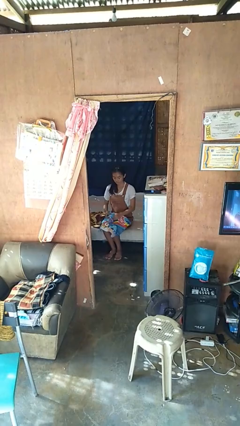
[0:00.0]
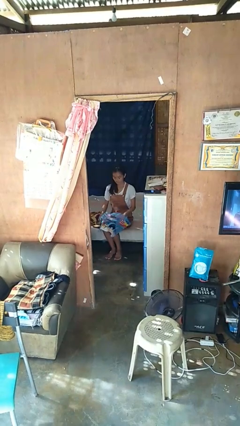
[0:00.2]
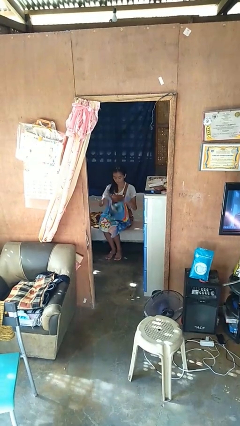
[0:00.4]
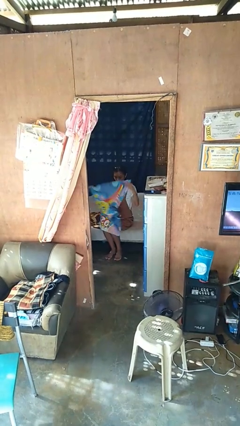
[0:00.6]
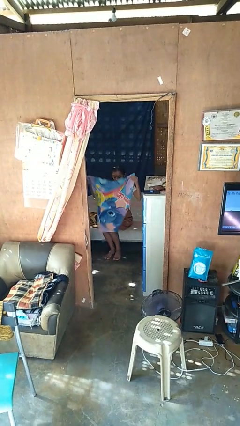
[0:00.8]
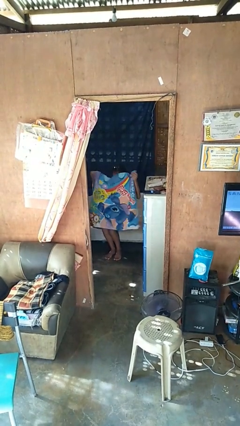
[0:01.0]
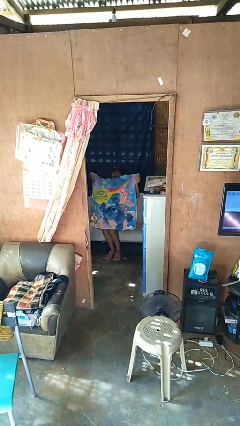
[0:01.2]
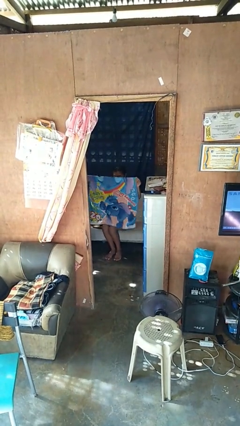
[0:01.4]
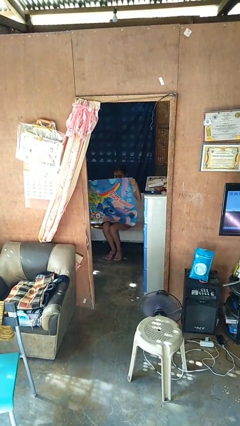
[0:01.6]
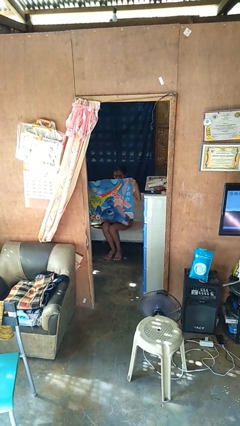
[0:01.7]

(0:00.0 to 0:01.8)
person unfolds blanket

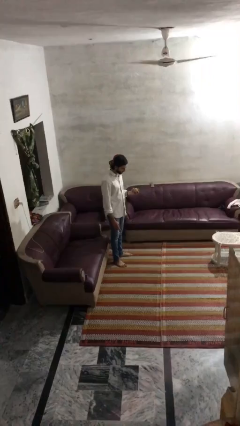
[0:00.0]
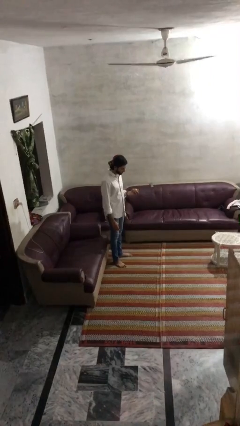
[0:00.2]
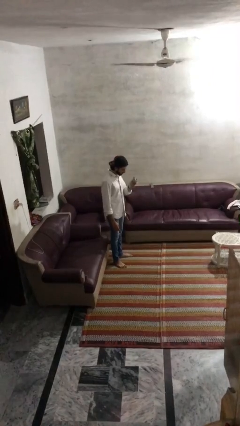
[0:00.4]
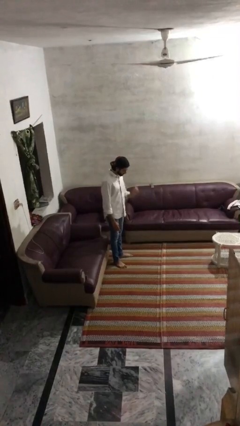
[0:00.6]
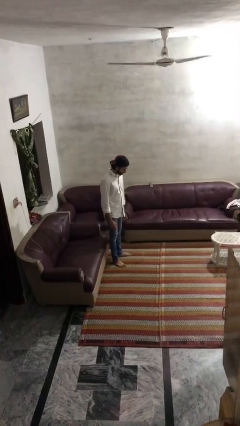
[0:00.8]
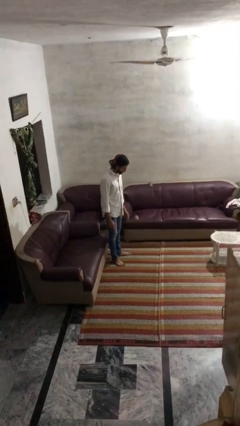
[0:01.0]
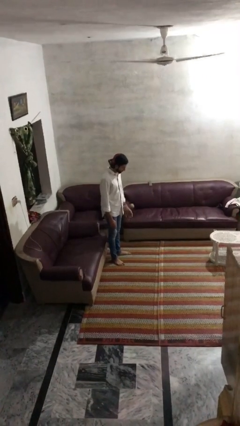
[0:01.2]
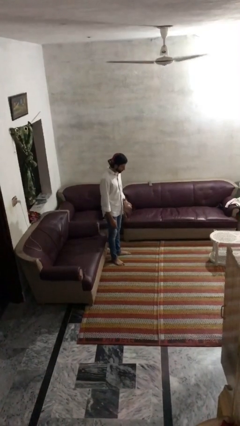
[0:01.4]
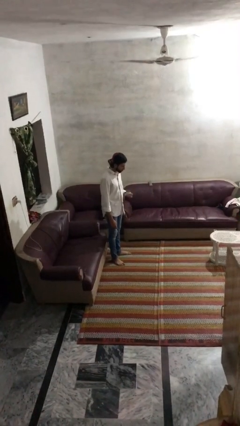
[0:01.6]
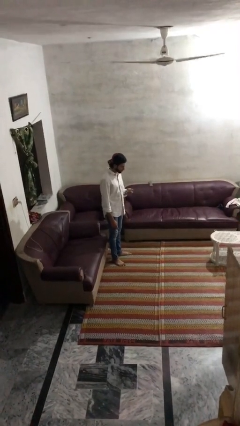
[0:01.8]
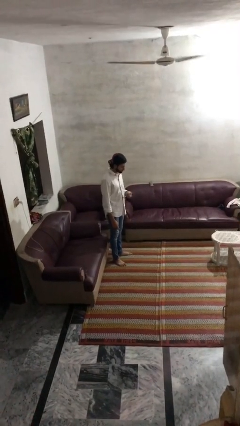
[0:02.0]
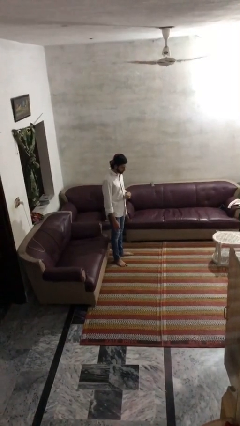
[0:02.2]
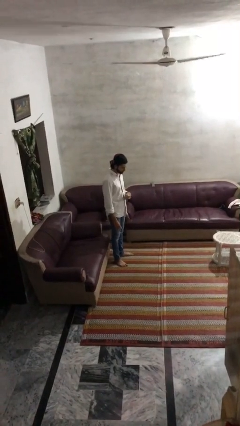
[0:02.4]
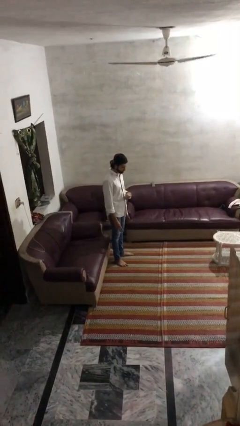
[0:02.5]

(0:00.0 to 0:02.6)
person bounces ball on floor

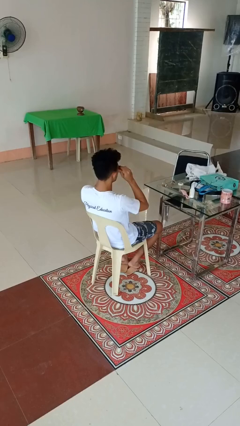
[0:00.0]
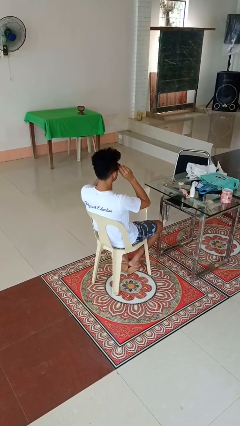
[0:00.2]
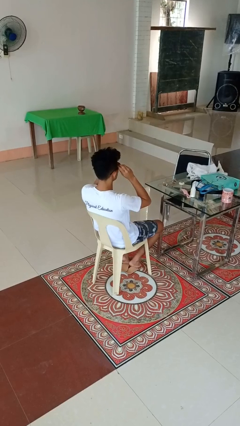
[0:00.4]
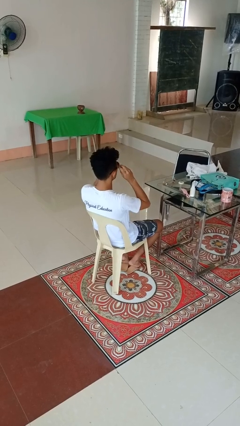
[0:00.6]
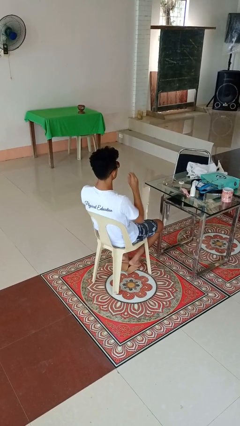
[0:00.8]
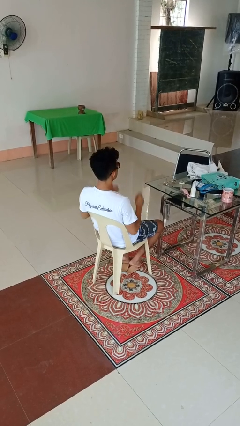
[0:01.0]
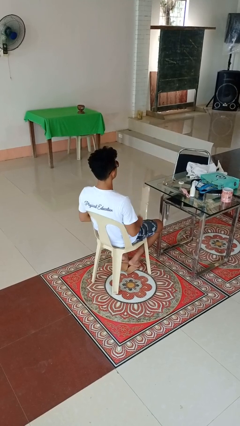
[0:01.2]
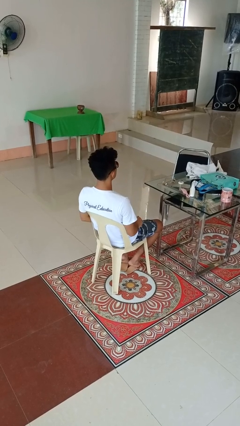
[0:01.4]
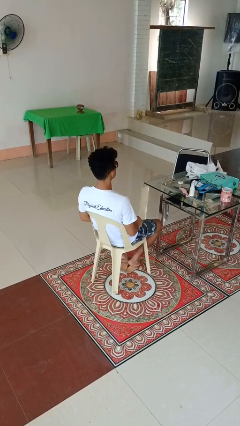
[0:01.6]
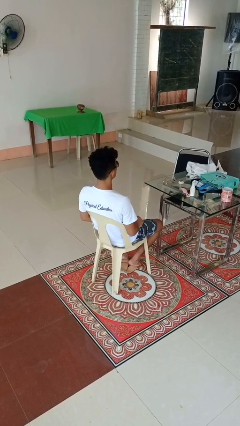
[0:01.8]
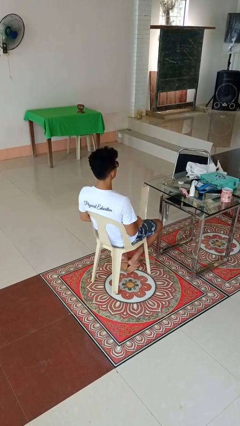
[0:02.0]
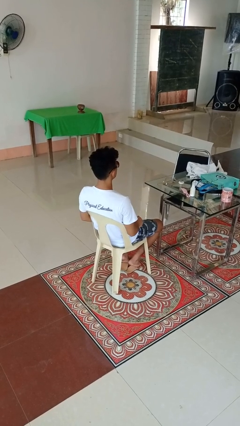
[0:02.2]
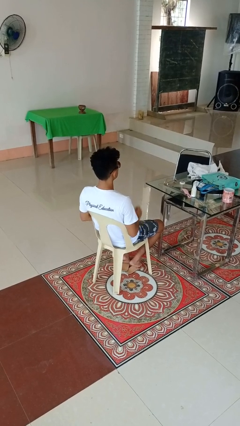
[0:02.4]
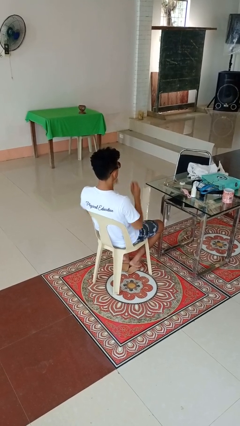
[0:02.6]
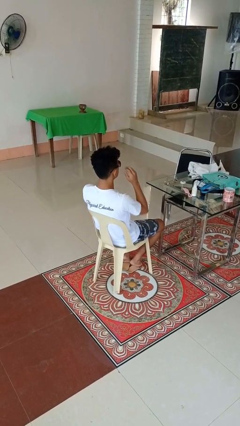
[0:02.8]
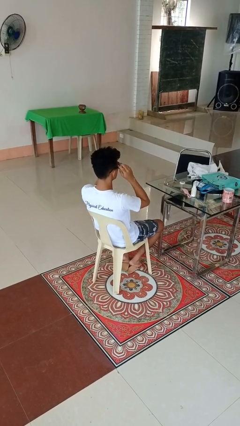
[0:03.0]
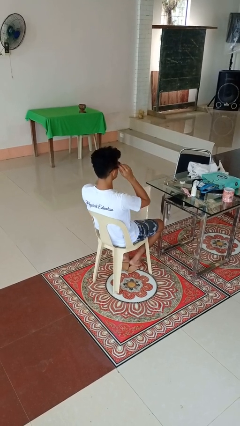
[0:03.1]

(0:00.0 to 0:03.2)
person puts on sunglasses

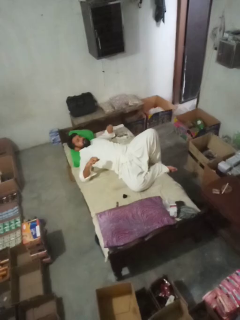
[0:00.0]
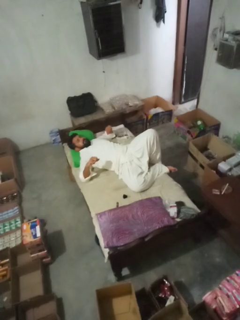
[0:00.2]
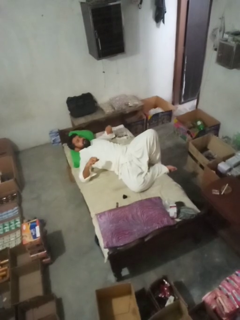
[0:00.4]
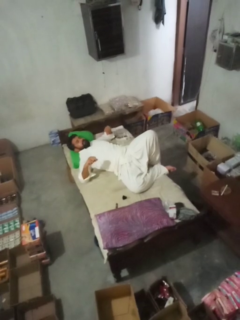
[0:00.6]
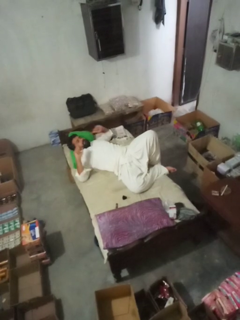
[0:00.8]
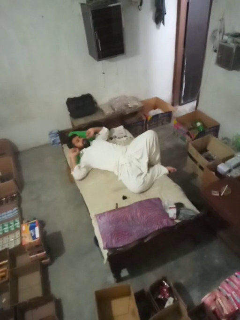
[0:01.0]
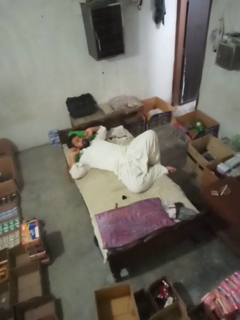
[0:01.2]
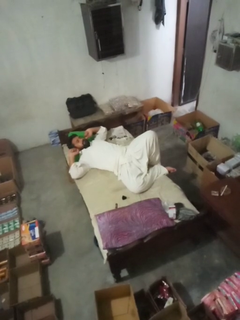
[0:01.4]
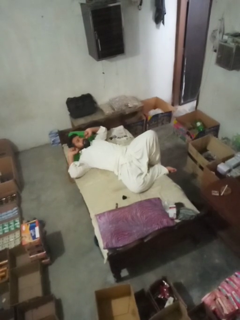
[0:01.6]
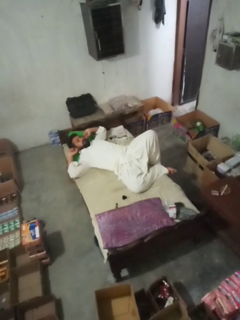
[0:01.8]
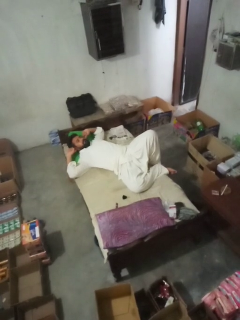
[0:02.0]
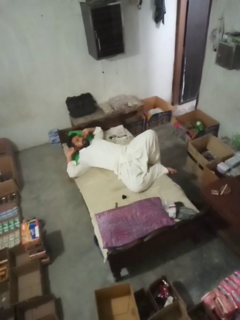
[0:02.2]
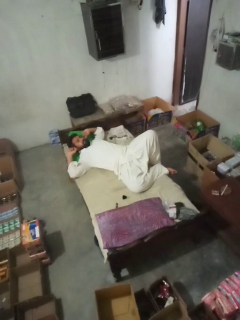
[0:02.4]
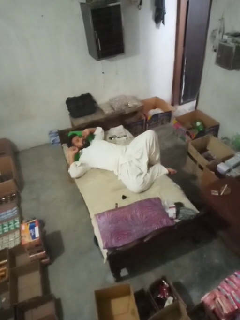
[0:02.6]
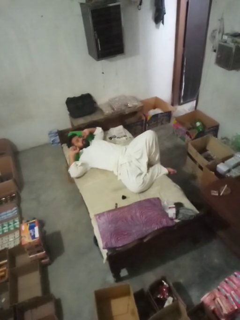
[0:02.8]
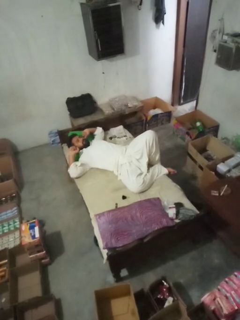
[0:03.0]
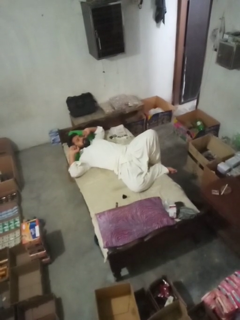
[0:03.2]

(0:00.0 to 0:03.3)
person puts fingers in ear

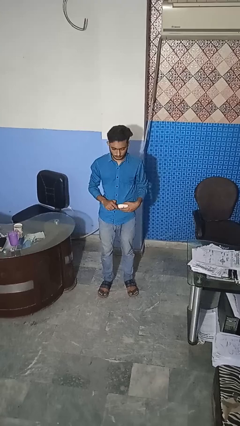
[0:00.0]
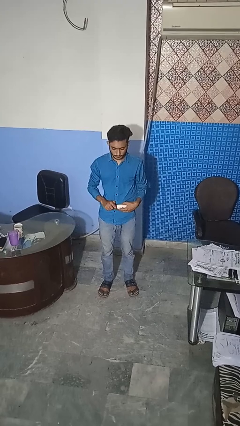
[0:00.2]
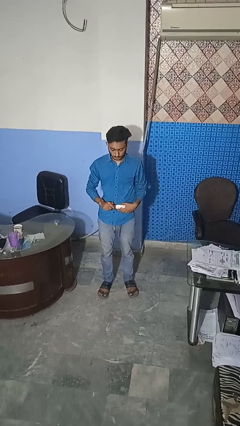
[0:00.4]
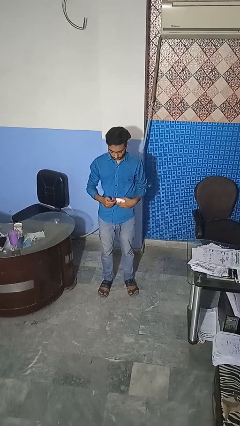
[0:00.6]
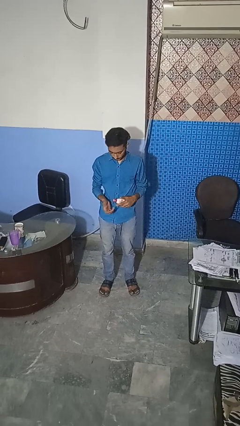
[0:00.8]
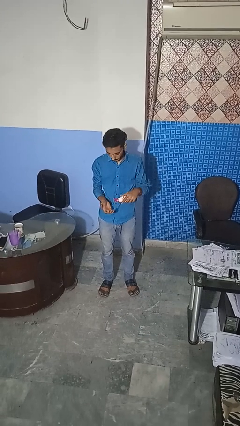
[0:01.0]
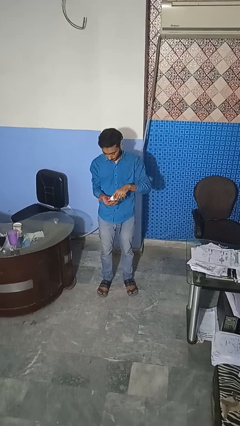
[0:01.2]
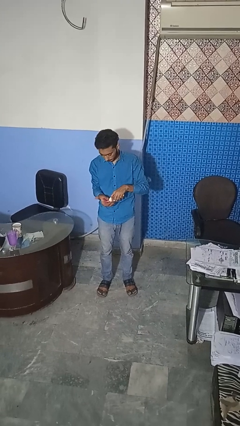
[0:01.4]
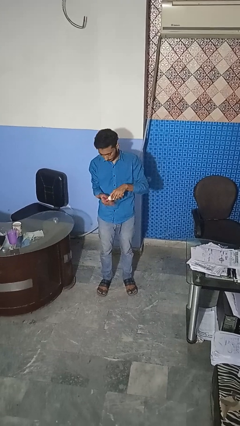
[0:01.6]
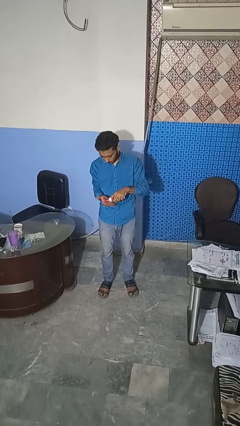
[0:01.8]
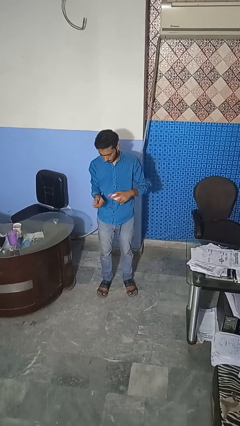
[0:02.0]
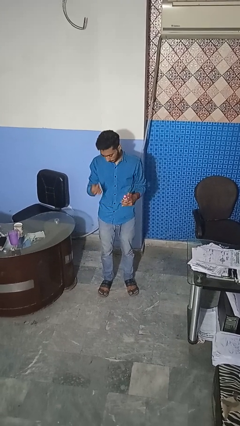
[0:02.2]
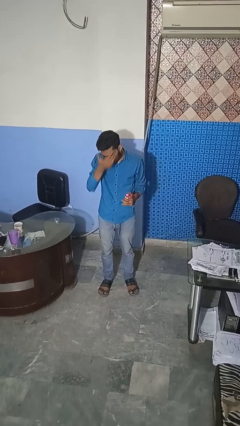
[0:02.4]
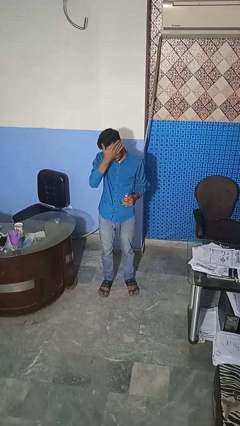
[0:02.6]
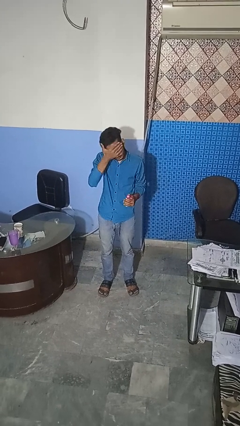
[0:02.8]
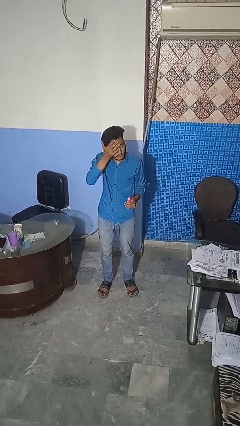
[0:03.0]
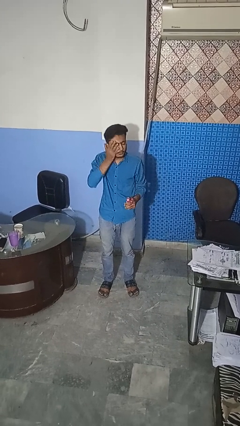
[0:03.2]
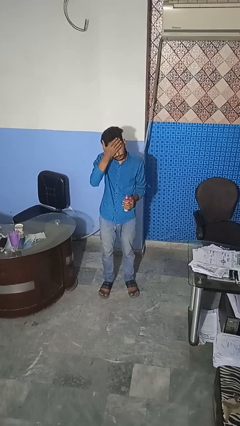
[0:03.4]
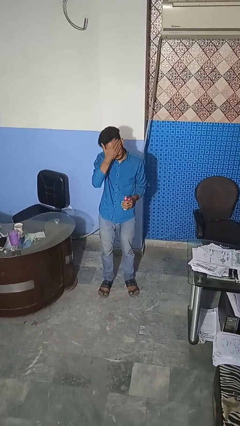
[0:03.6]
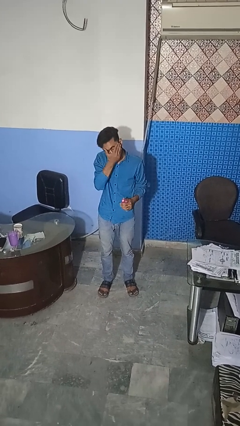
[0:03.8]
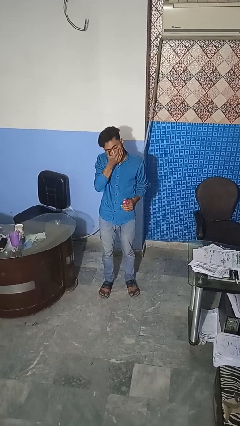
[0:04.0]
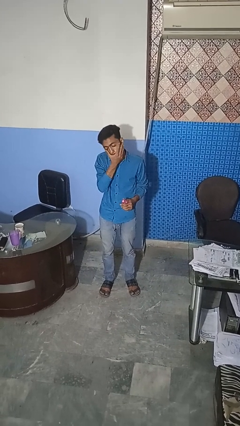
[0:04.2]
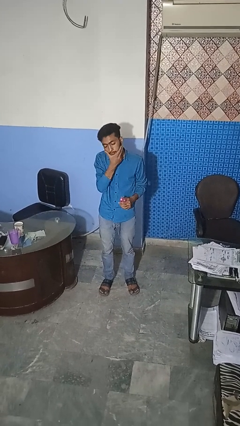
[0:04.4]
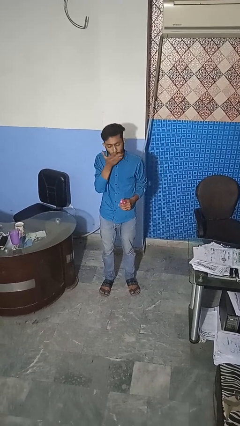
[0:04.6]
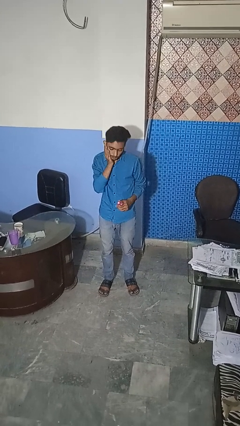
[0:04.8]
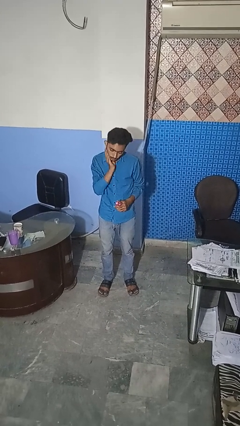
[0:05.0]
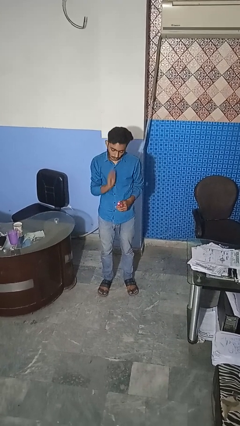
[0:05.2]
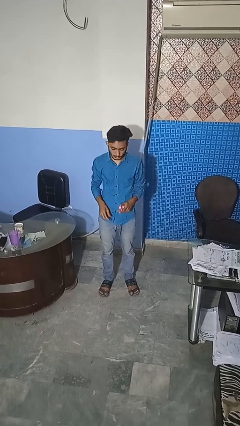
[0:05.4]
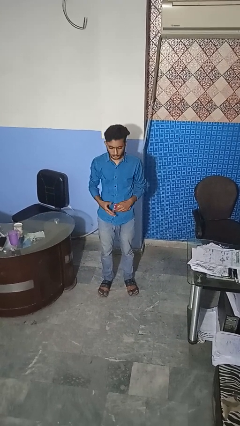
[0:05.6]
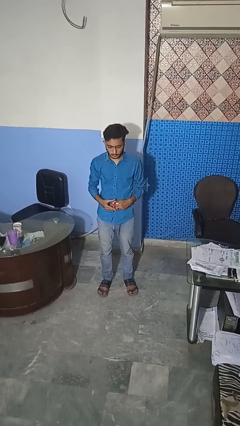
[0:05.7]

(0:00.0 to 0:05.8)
person applies facial moisturizer

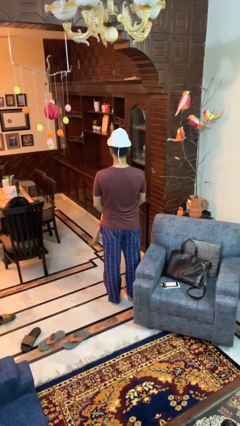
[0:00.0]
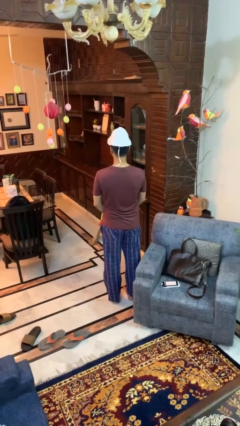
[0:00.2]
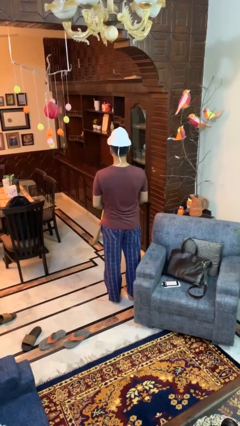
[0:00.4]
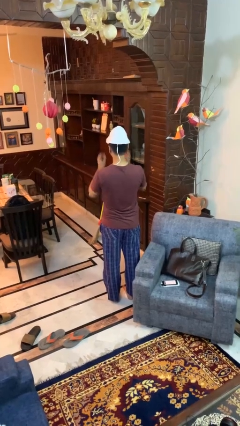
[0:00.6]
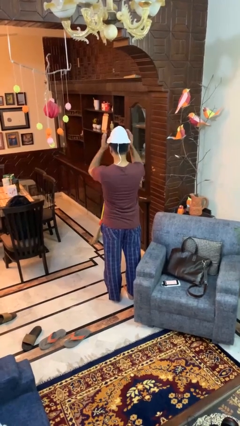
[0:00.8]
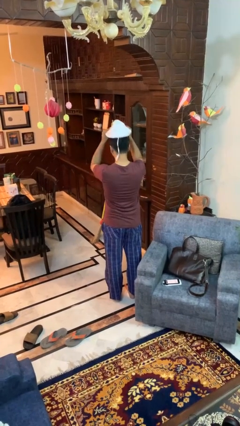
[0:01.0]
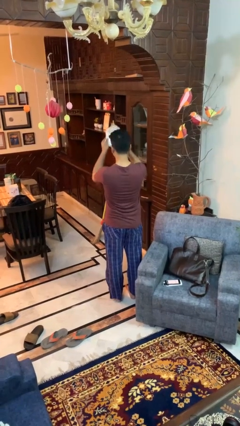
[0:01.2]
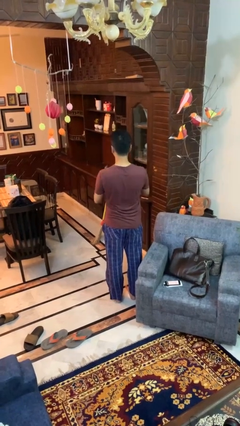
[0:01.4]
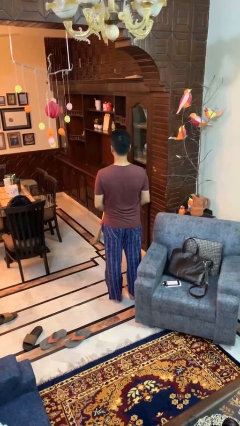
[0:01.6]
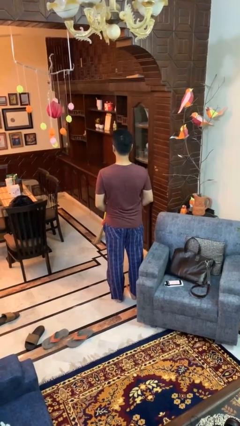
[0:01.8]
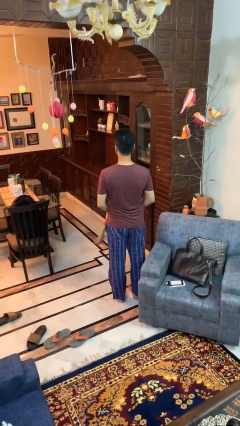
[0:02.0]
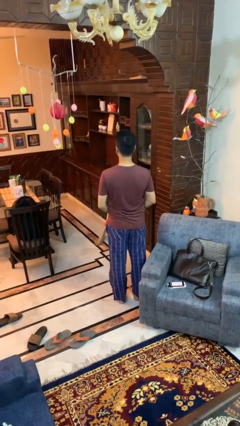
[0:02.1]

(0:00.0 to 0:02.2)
person takes off hat
